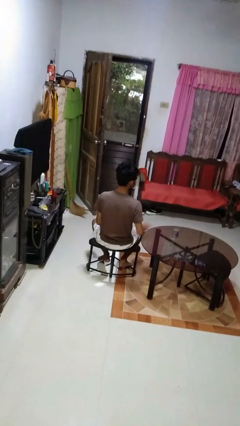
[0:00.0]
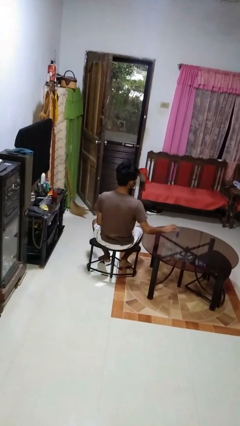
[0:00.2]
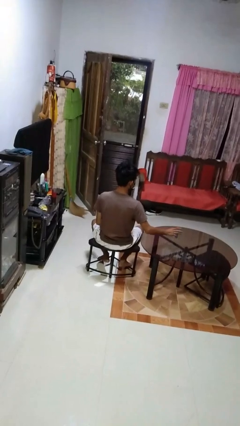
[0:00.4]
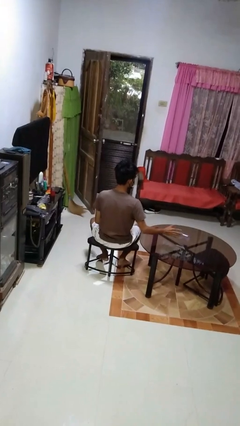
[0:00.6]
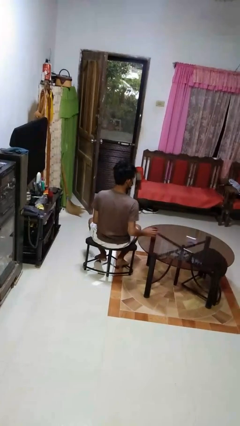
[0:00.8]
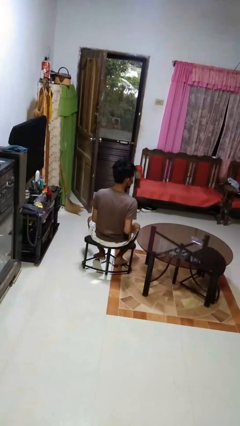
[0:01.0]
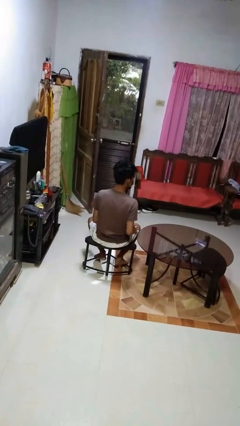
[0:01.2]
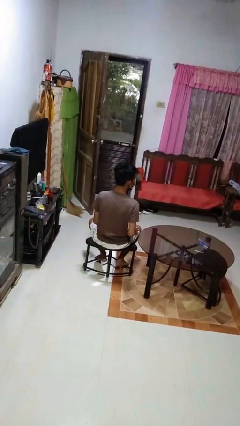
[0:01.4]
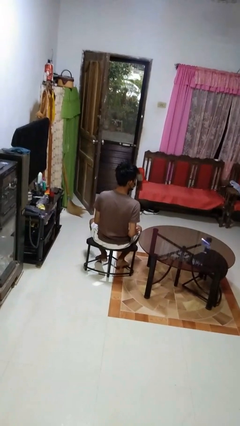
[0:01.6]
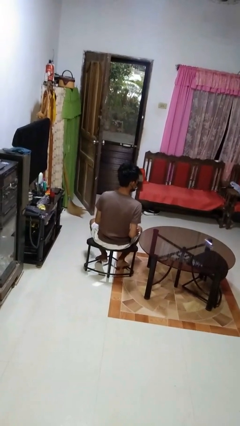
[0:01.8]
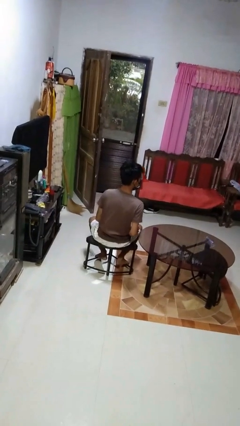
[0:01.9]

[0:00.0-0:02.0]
person knocks over glass

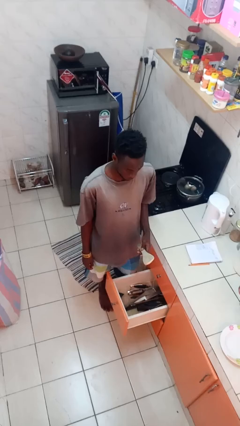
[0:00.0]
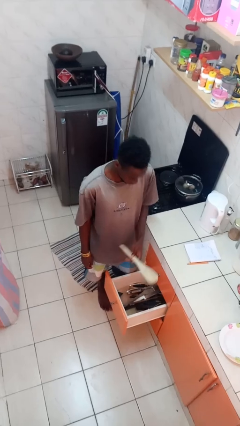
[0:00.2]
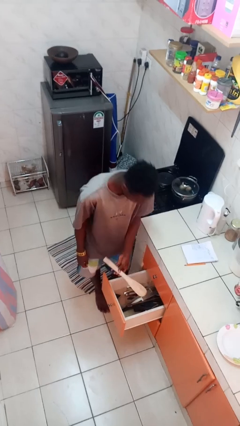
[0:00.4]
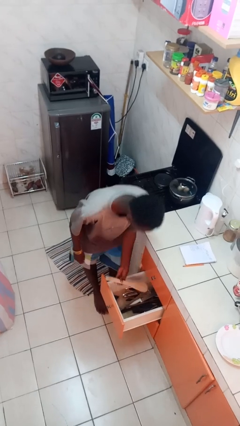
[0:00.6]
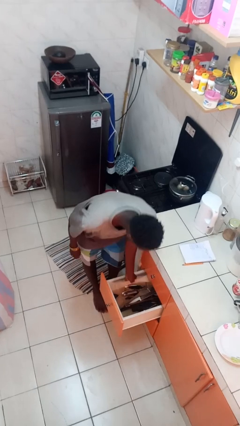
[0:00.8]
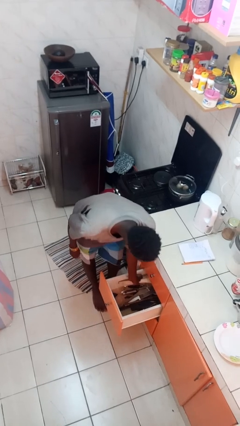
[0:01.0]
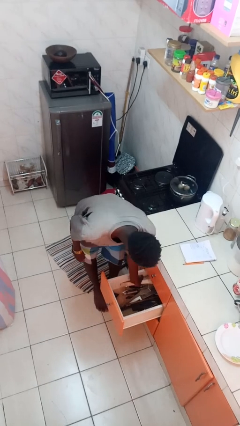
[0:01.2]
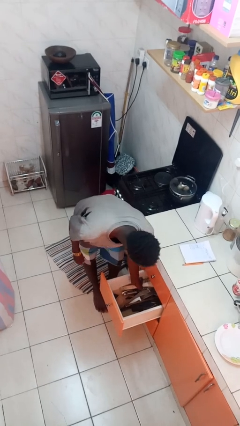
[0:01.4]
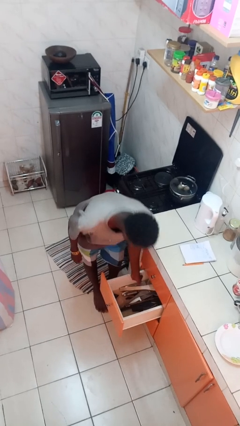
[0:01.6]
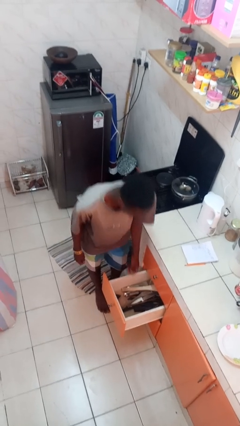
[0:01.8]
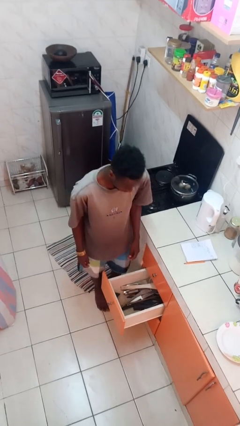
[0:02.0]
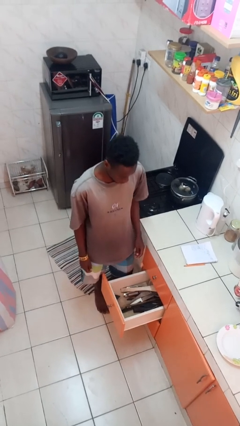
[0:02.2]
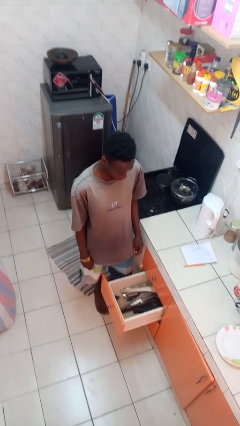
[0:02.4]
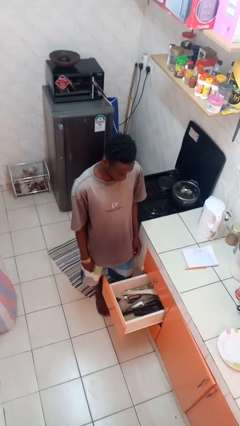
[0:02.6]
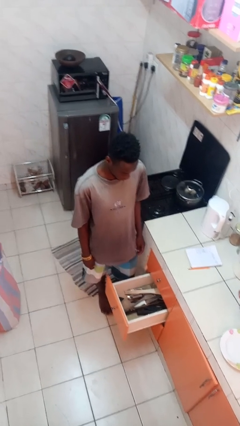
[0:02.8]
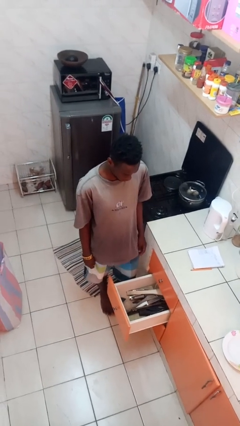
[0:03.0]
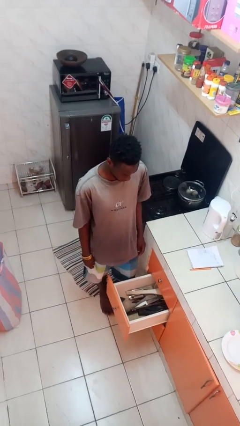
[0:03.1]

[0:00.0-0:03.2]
person puts object into kitchen drawer

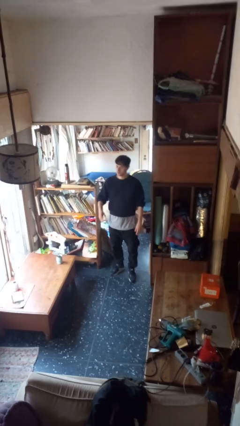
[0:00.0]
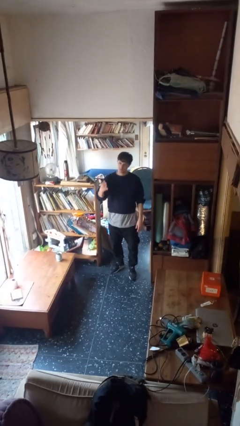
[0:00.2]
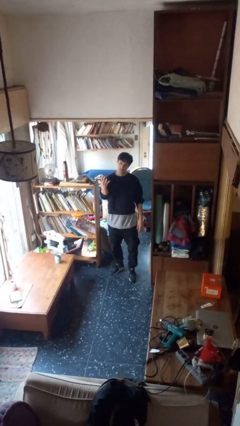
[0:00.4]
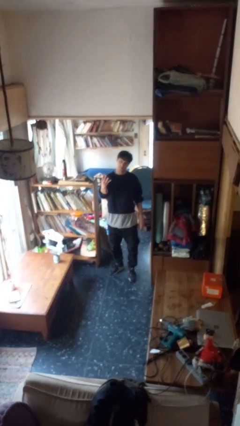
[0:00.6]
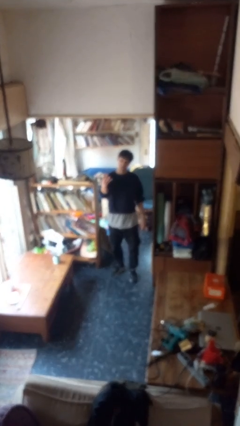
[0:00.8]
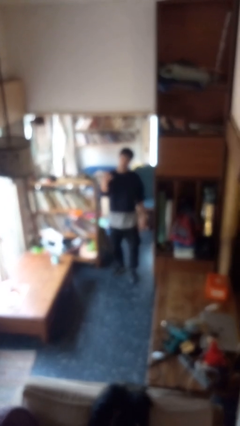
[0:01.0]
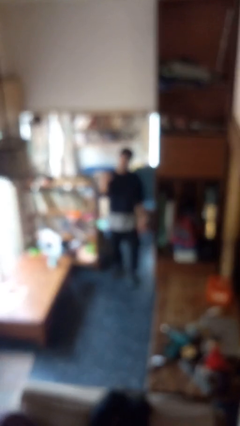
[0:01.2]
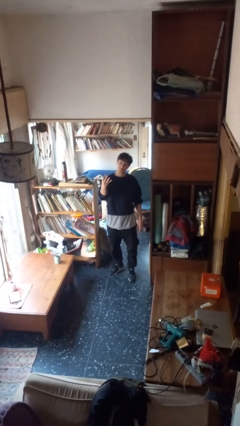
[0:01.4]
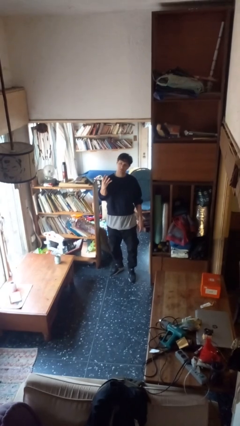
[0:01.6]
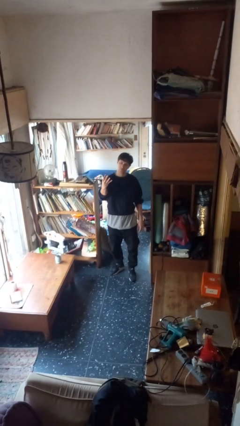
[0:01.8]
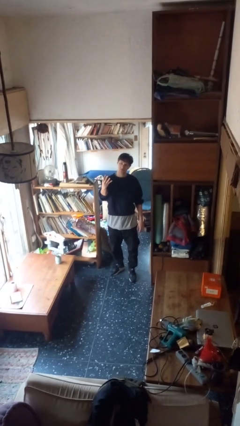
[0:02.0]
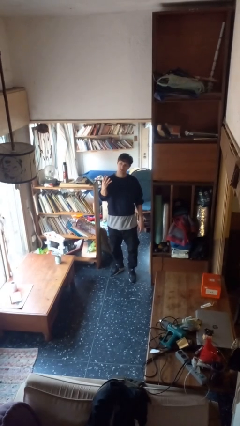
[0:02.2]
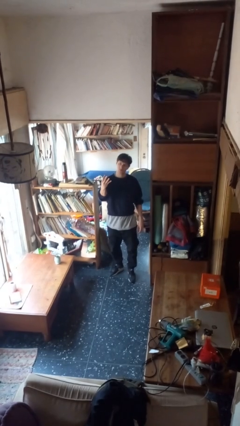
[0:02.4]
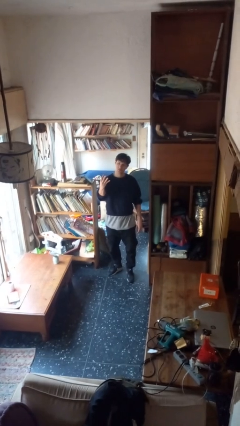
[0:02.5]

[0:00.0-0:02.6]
person gestures number four

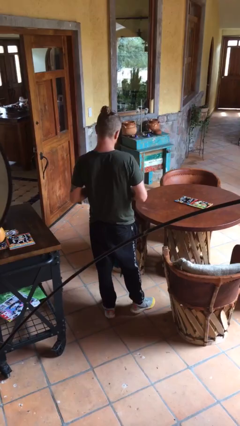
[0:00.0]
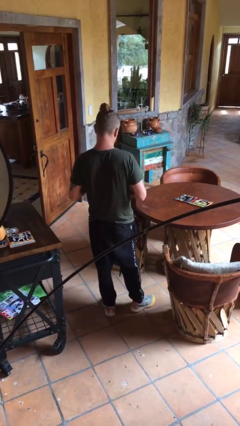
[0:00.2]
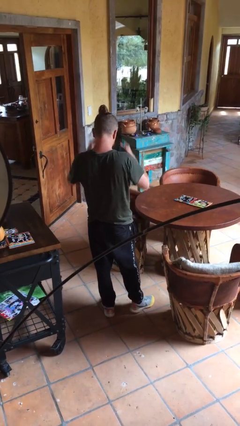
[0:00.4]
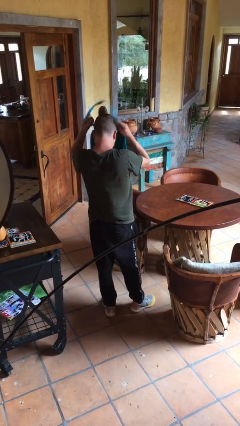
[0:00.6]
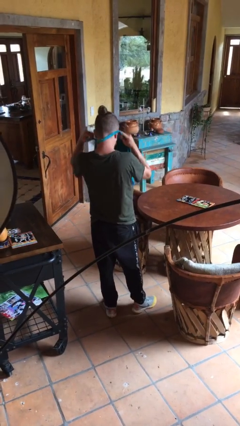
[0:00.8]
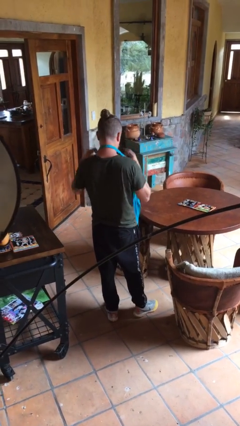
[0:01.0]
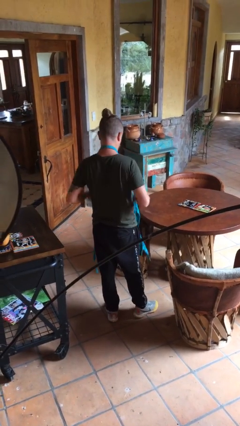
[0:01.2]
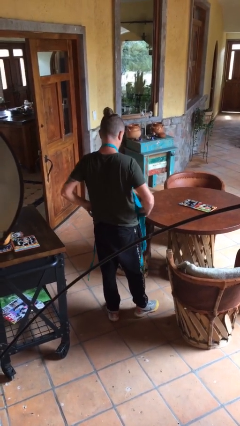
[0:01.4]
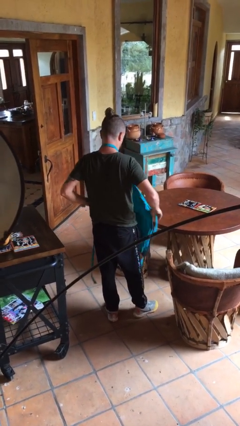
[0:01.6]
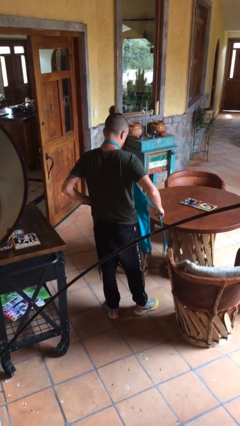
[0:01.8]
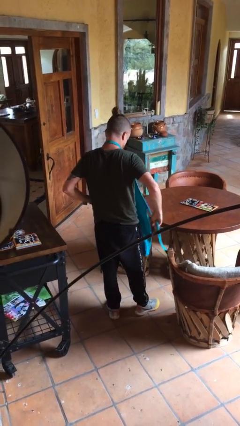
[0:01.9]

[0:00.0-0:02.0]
person puts on apron

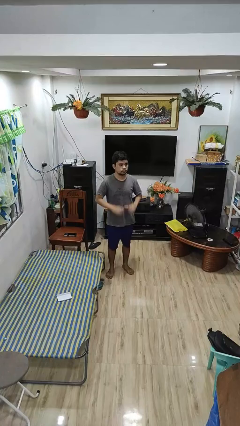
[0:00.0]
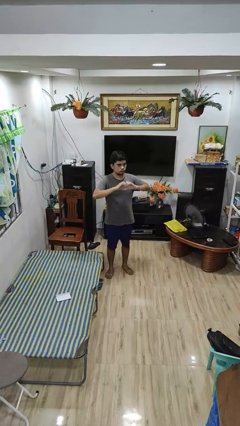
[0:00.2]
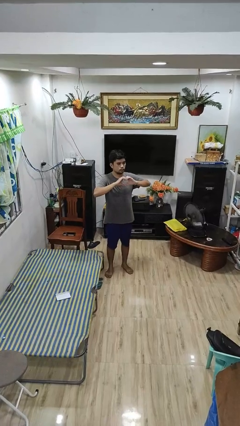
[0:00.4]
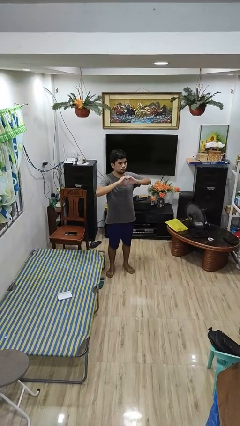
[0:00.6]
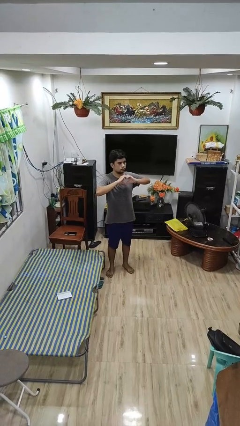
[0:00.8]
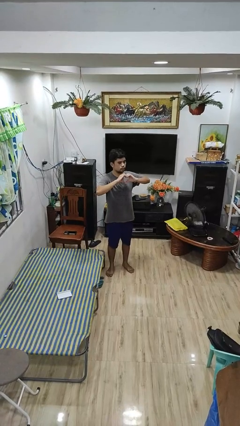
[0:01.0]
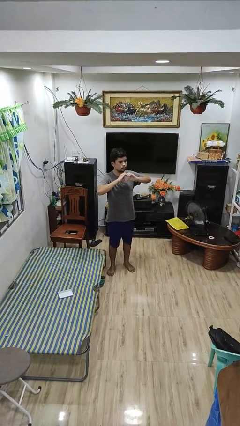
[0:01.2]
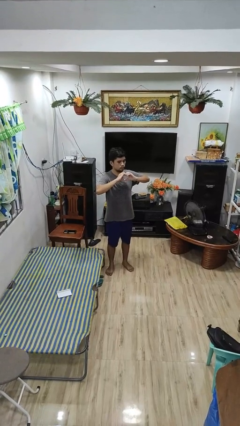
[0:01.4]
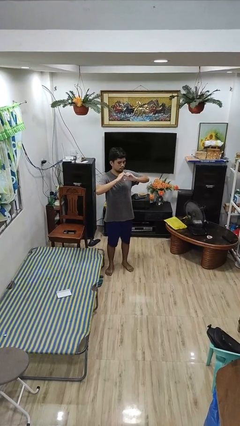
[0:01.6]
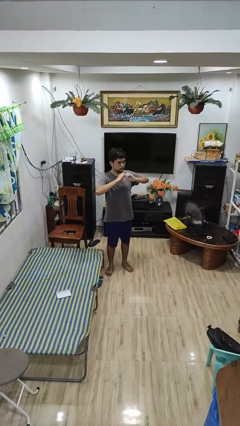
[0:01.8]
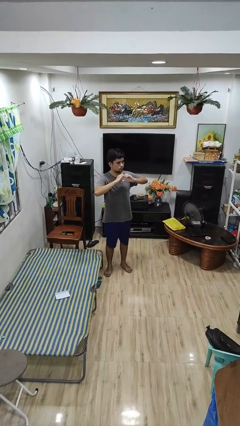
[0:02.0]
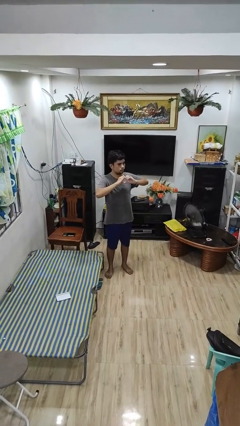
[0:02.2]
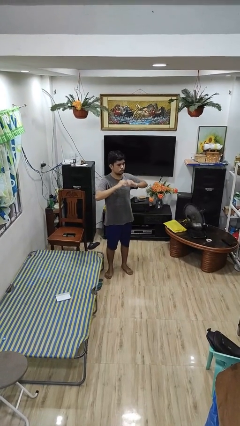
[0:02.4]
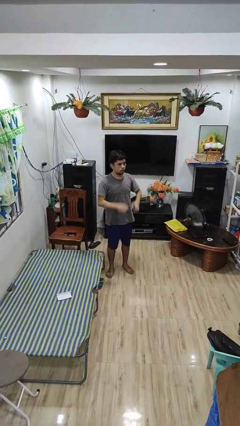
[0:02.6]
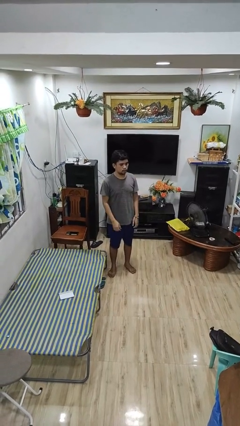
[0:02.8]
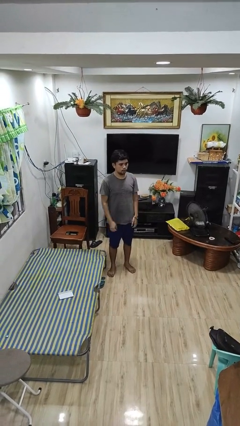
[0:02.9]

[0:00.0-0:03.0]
person gestures heart

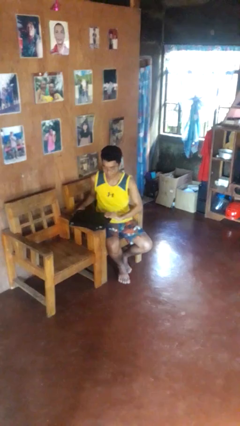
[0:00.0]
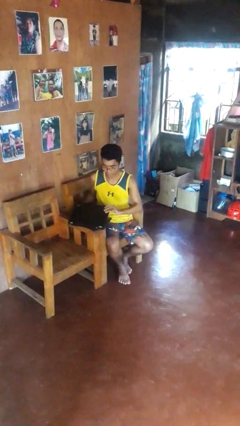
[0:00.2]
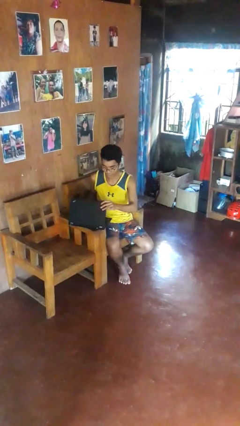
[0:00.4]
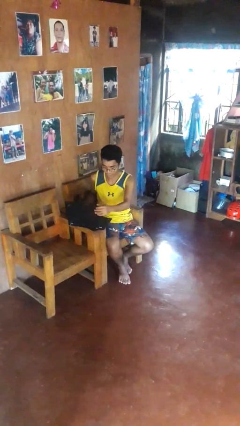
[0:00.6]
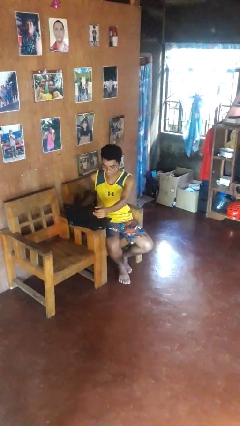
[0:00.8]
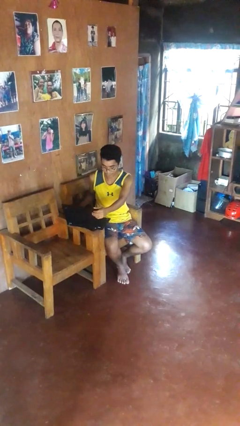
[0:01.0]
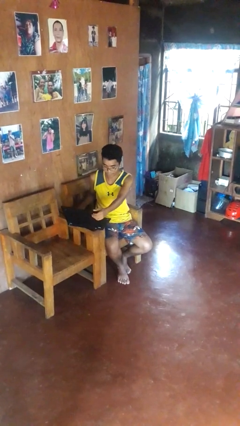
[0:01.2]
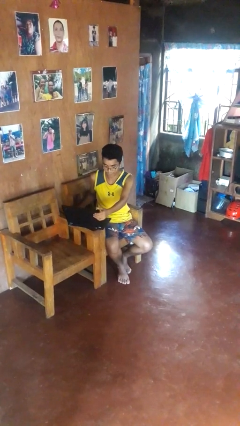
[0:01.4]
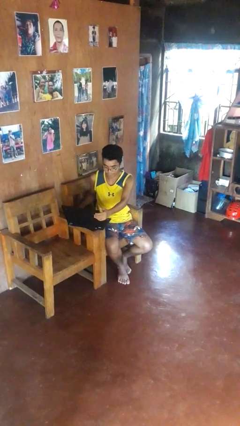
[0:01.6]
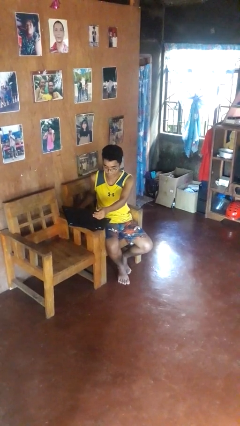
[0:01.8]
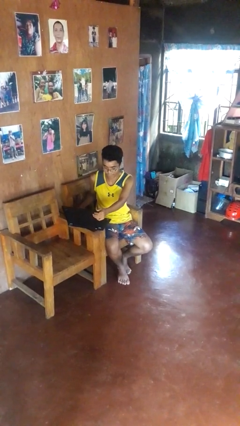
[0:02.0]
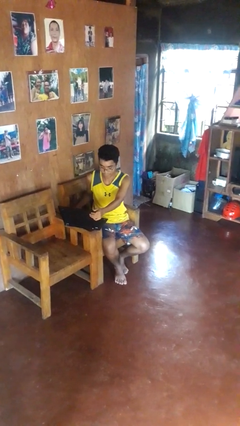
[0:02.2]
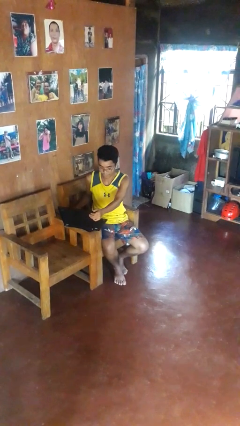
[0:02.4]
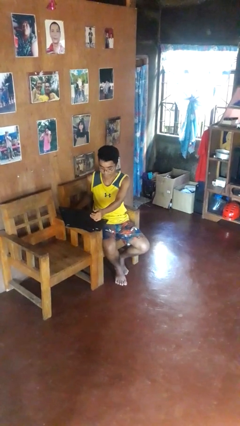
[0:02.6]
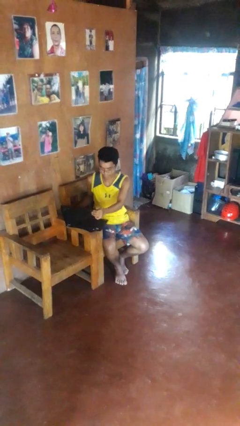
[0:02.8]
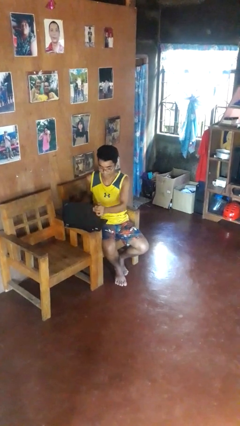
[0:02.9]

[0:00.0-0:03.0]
person opens laptop

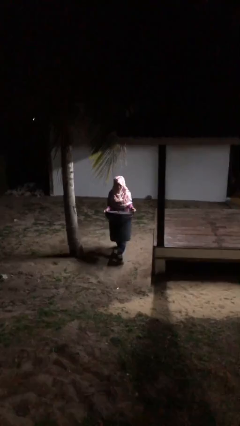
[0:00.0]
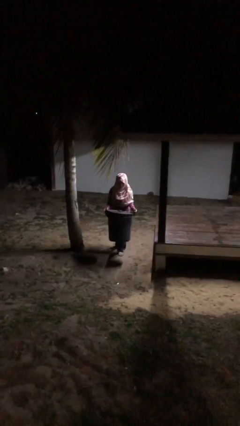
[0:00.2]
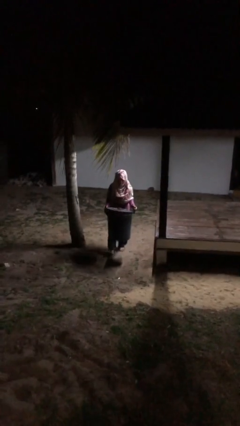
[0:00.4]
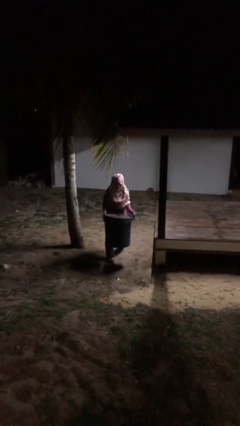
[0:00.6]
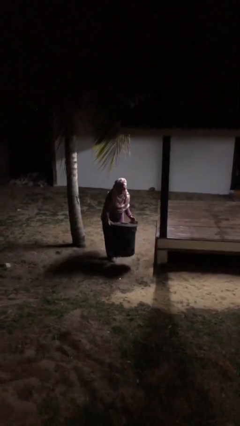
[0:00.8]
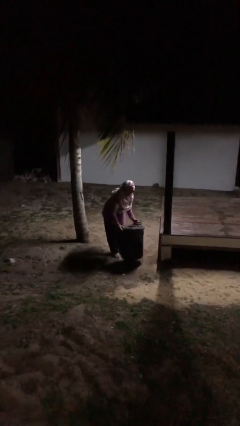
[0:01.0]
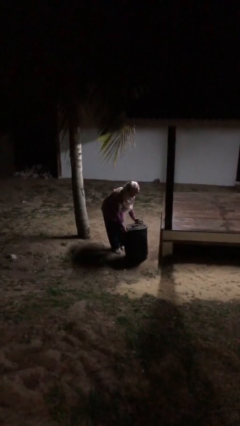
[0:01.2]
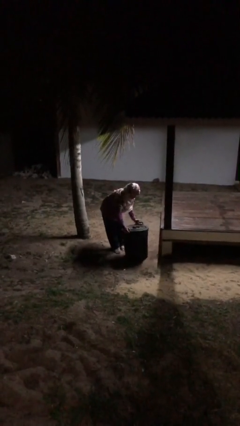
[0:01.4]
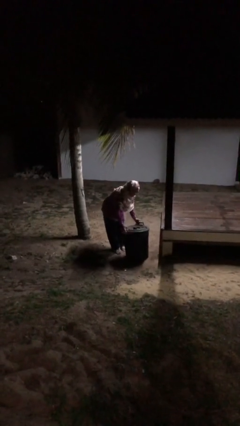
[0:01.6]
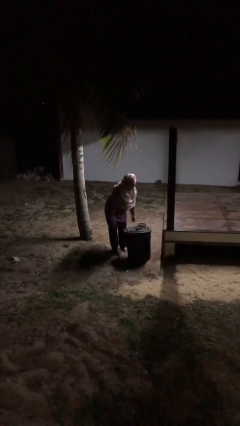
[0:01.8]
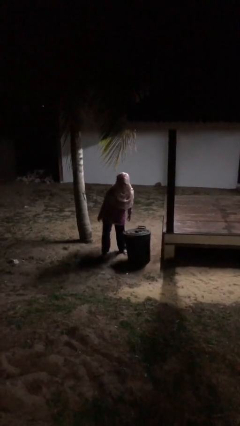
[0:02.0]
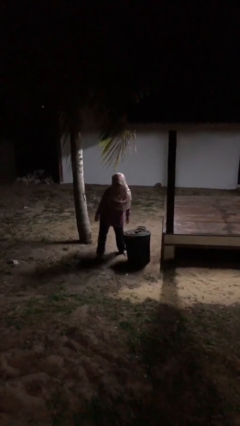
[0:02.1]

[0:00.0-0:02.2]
person puts down object on floor
